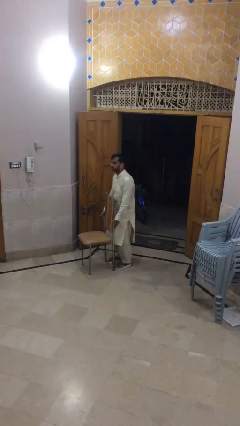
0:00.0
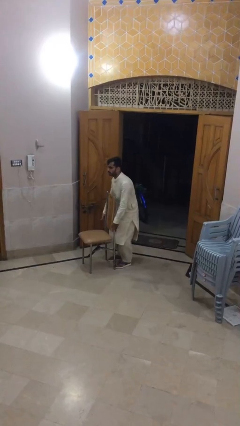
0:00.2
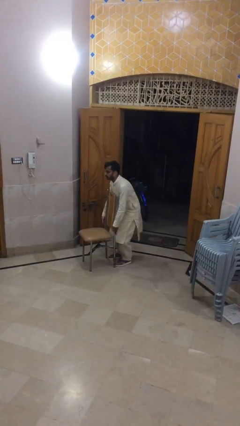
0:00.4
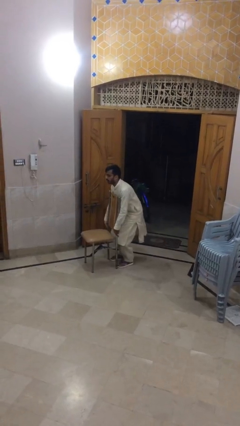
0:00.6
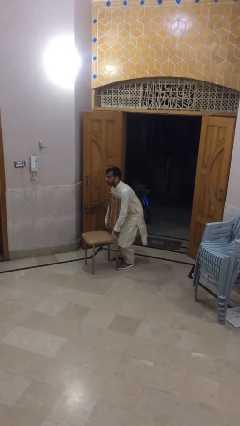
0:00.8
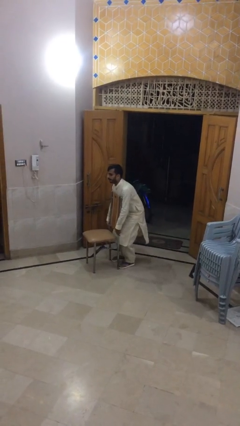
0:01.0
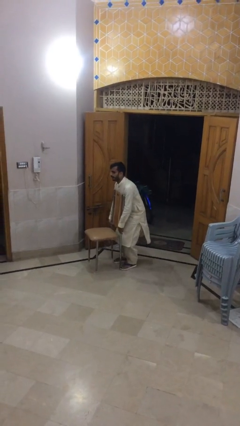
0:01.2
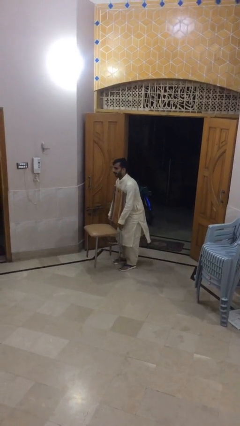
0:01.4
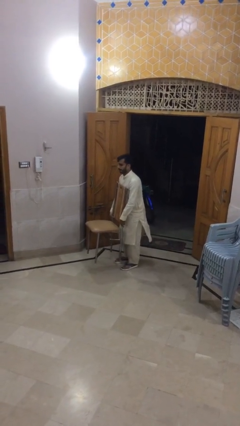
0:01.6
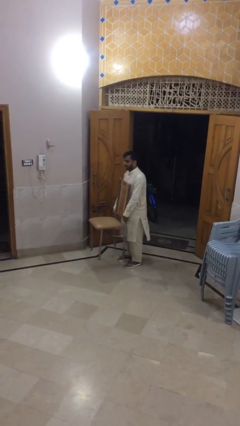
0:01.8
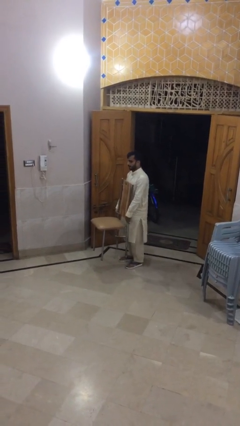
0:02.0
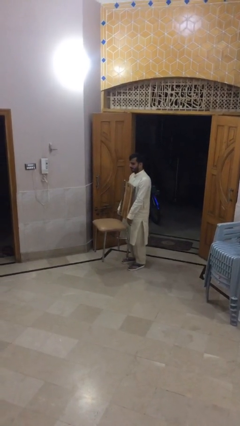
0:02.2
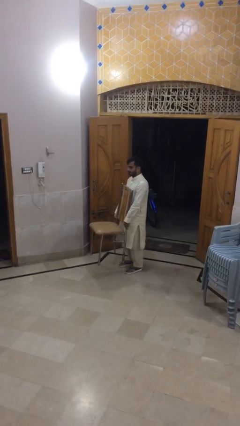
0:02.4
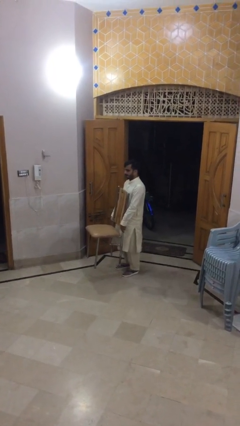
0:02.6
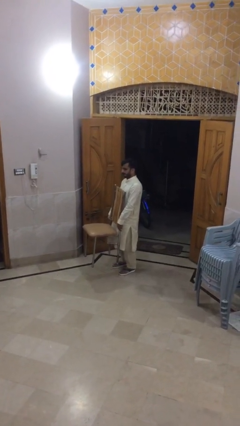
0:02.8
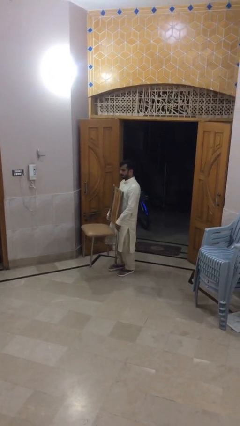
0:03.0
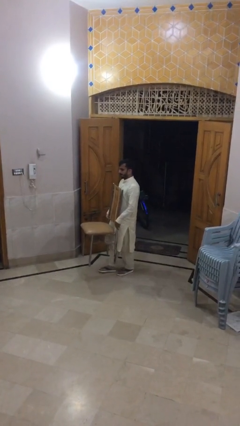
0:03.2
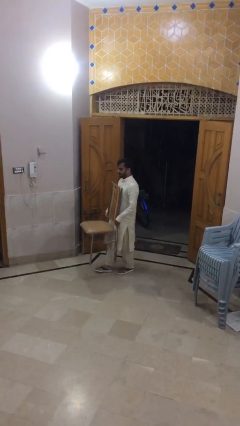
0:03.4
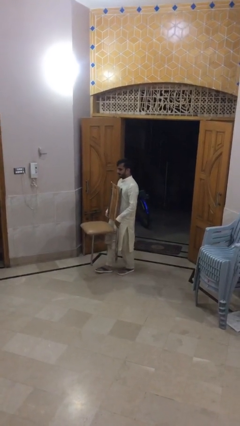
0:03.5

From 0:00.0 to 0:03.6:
person picks up object from floor

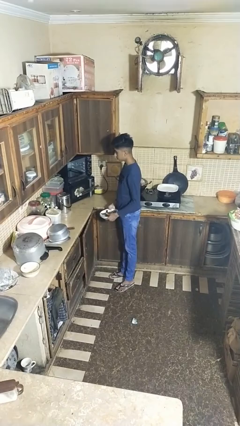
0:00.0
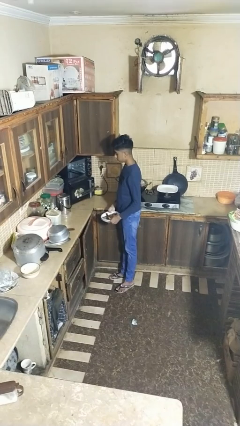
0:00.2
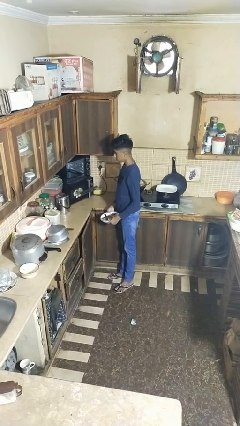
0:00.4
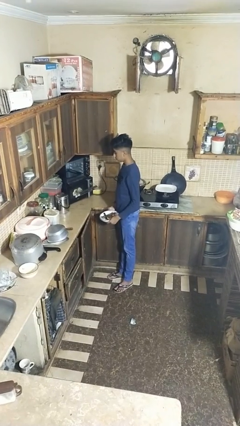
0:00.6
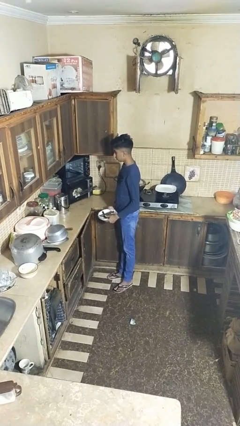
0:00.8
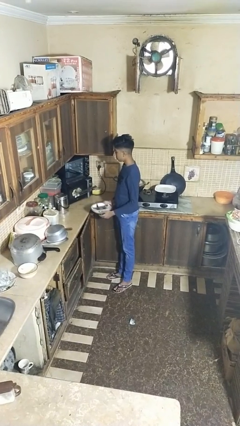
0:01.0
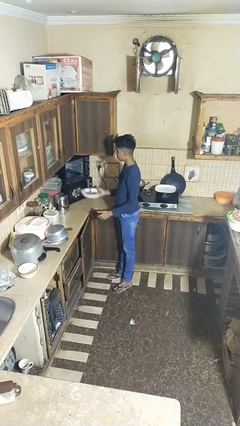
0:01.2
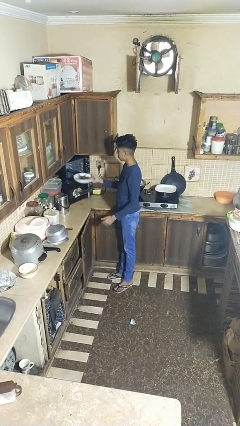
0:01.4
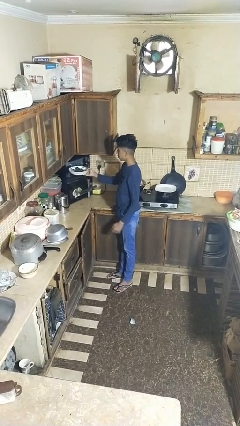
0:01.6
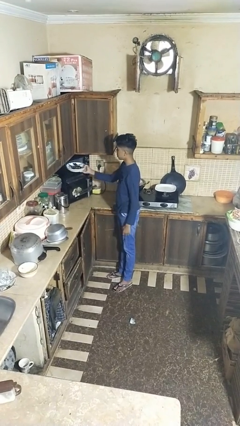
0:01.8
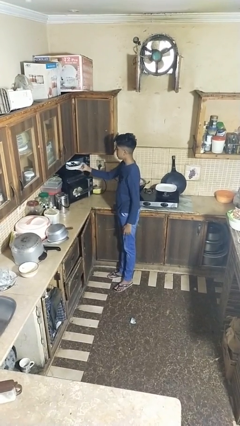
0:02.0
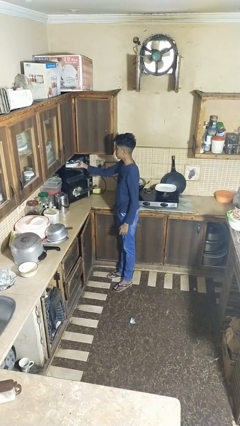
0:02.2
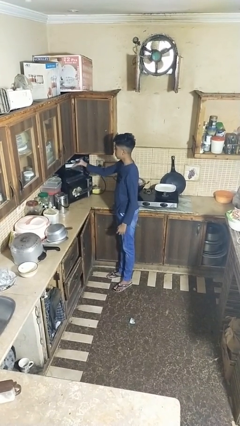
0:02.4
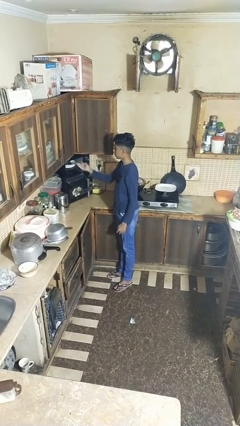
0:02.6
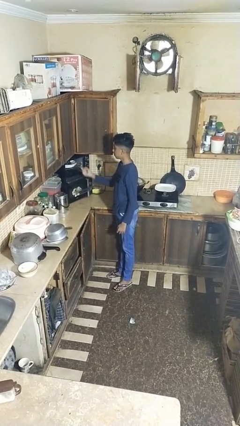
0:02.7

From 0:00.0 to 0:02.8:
person loads dishwasher

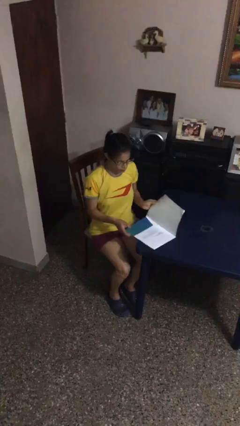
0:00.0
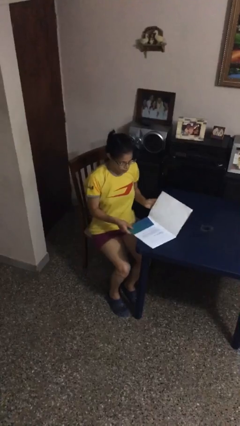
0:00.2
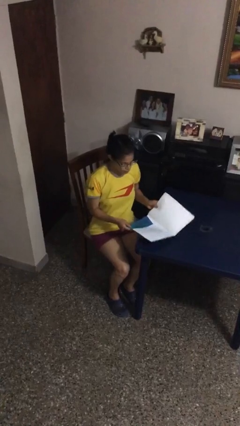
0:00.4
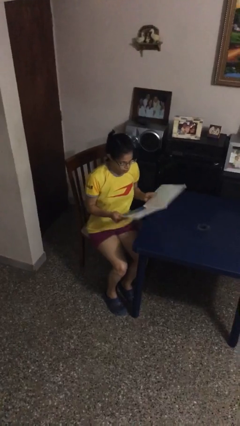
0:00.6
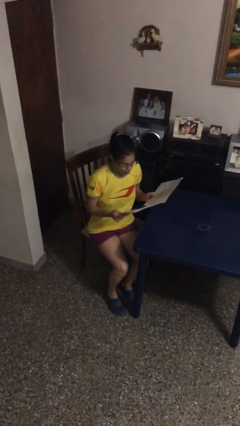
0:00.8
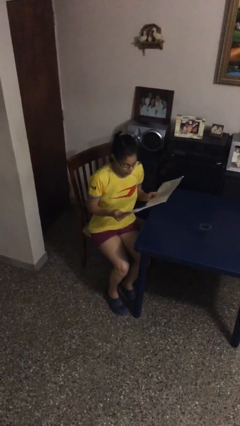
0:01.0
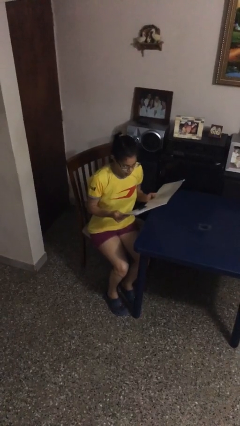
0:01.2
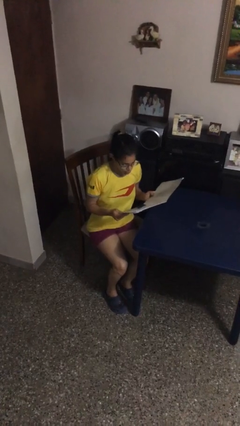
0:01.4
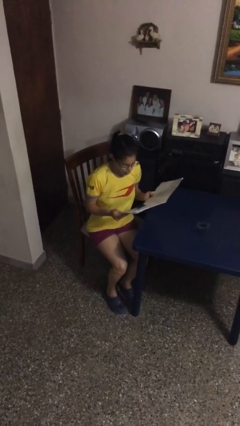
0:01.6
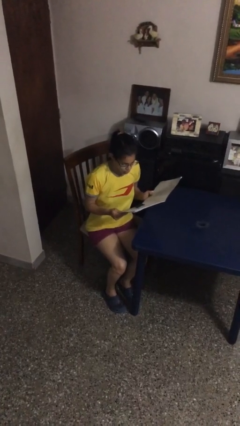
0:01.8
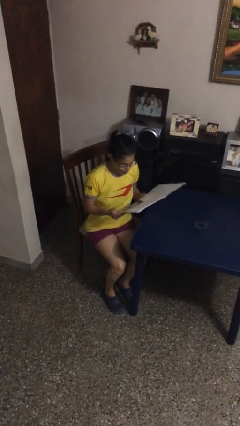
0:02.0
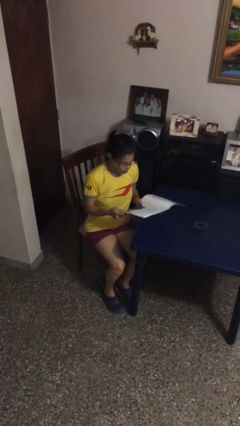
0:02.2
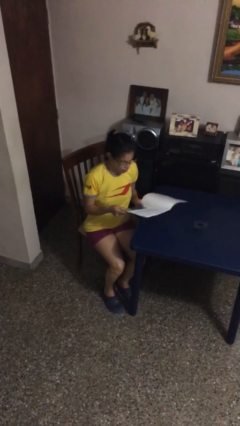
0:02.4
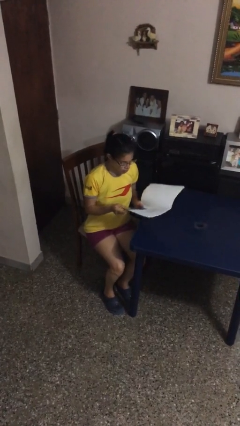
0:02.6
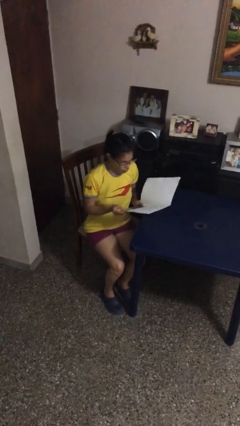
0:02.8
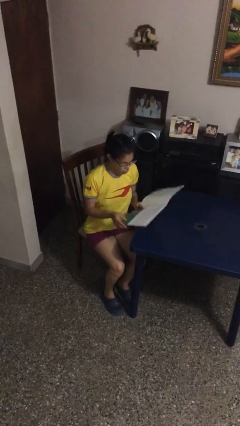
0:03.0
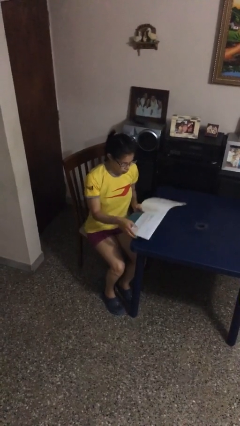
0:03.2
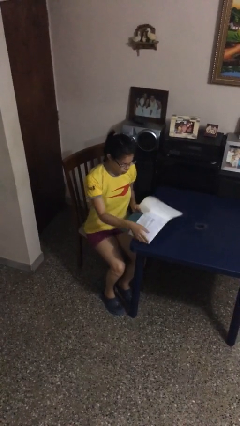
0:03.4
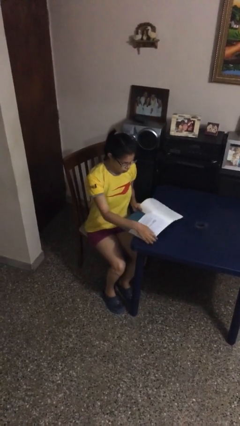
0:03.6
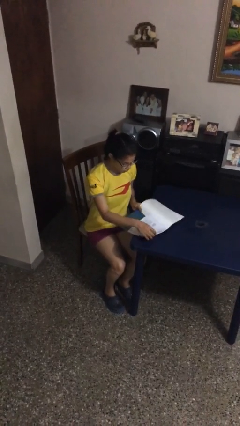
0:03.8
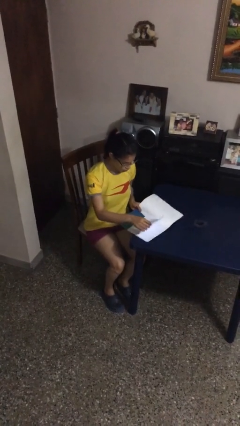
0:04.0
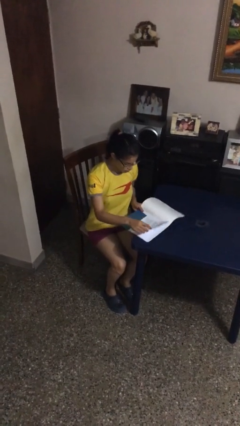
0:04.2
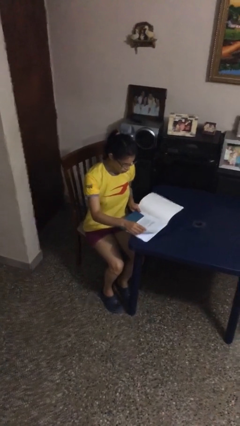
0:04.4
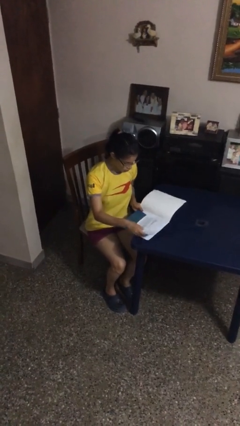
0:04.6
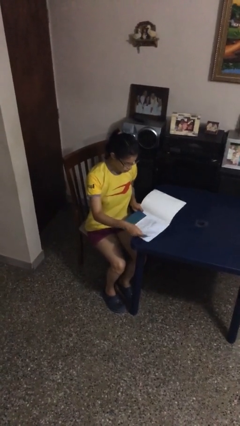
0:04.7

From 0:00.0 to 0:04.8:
person reads document

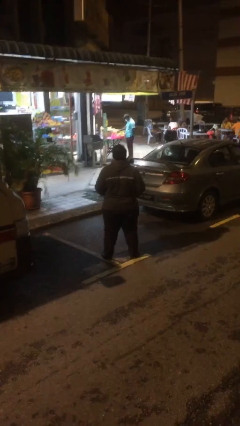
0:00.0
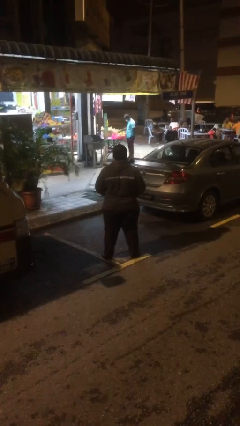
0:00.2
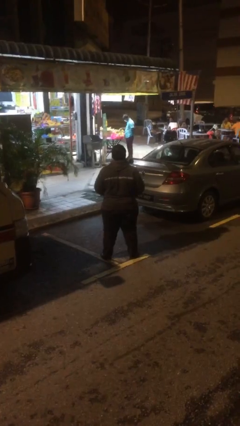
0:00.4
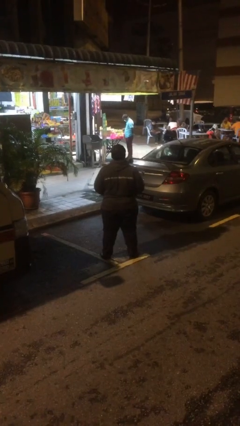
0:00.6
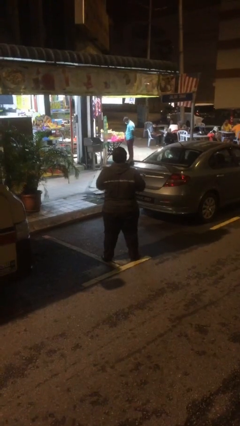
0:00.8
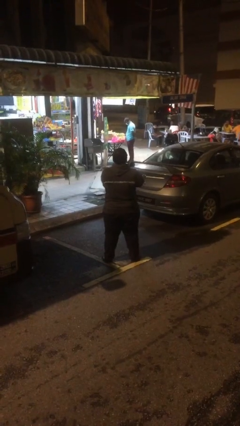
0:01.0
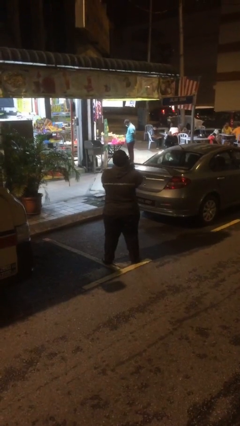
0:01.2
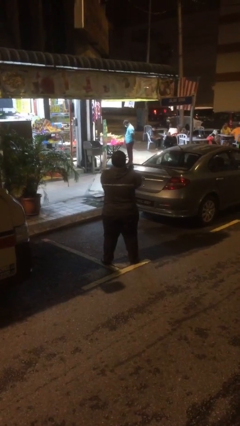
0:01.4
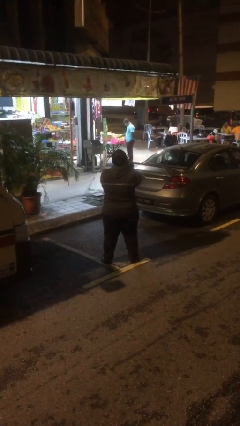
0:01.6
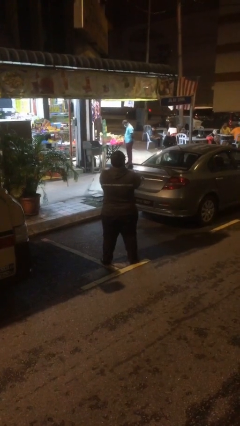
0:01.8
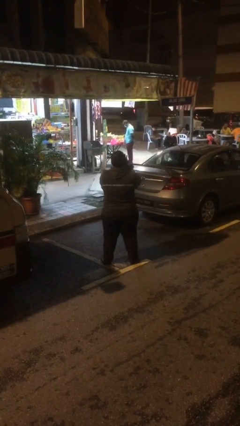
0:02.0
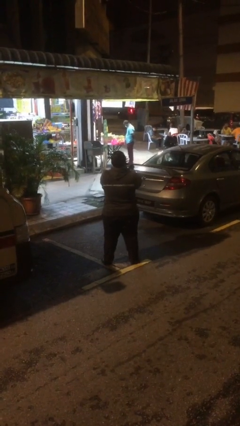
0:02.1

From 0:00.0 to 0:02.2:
person blows into hands

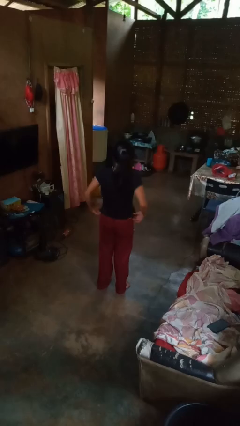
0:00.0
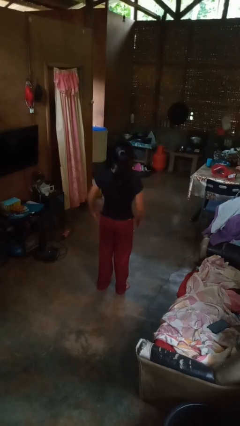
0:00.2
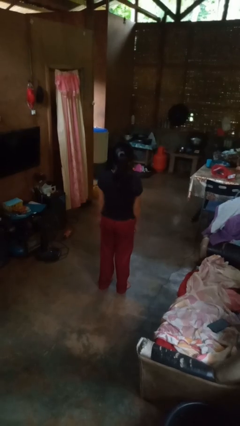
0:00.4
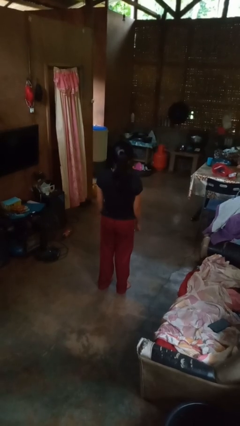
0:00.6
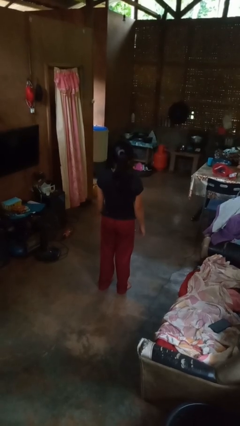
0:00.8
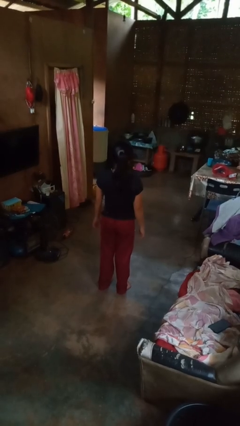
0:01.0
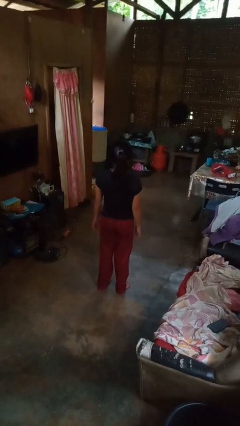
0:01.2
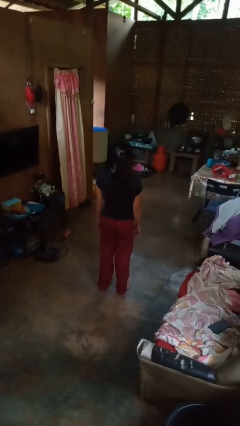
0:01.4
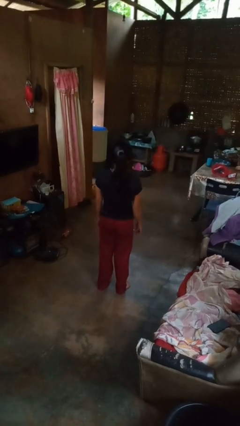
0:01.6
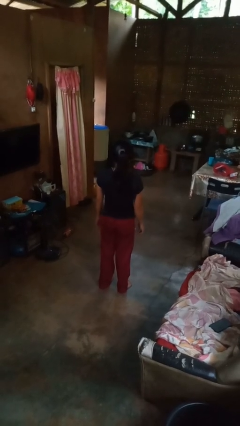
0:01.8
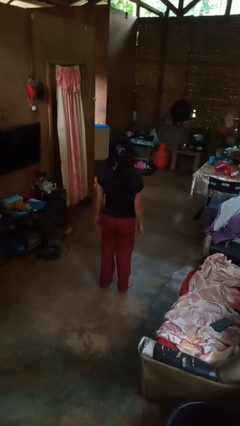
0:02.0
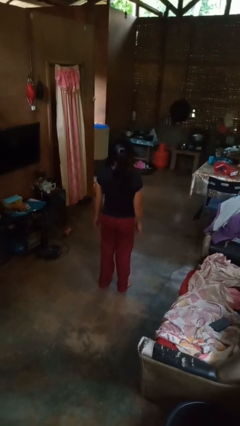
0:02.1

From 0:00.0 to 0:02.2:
person untucks shirt

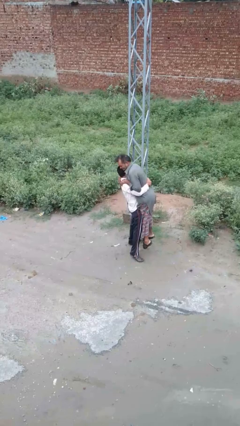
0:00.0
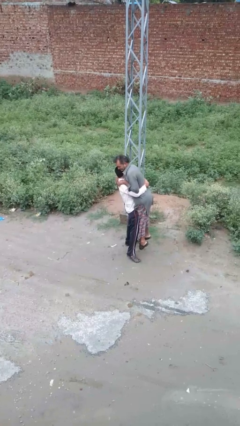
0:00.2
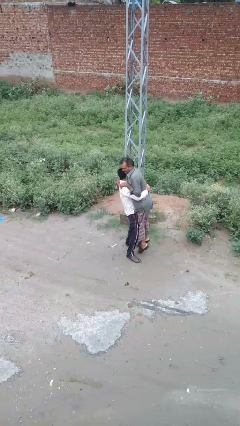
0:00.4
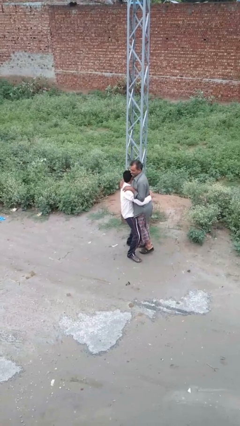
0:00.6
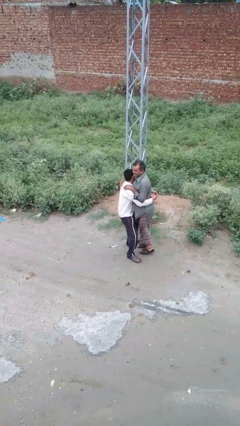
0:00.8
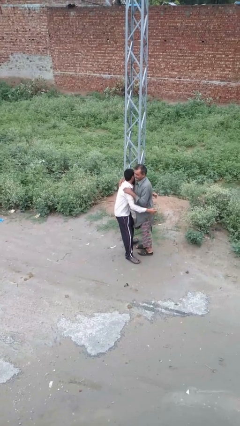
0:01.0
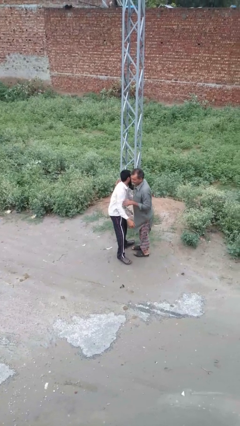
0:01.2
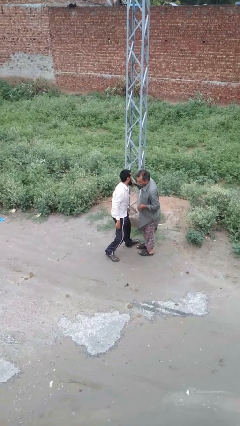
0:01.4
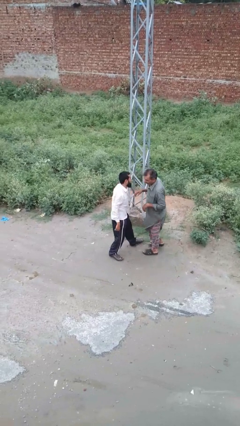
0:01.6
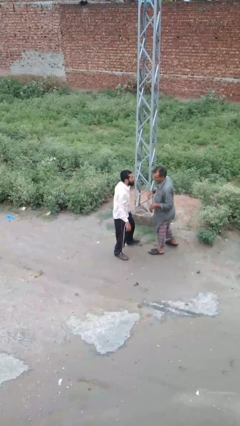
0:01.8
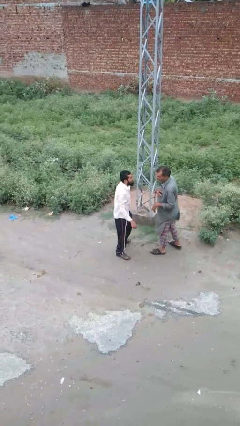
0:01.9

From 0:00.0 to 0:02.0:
person puts down person
